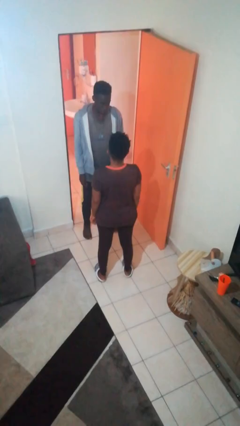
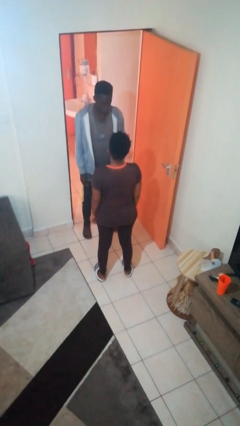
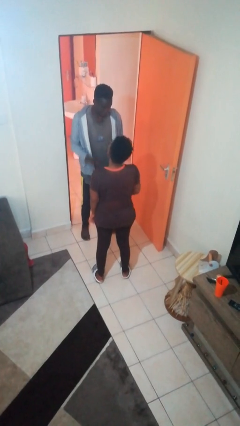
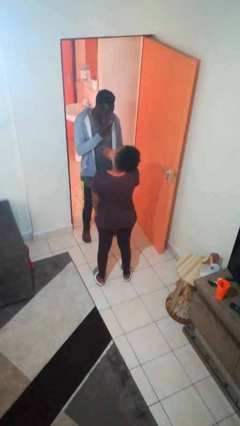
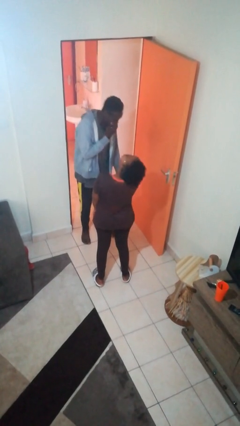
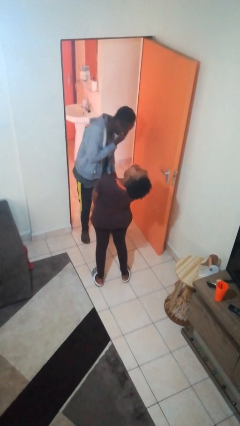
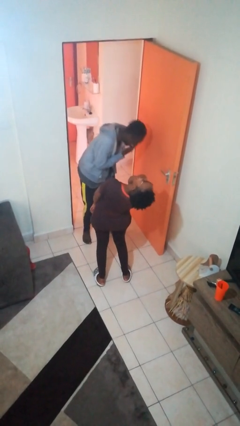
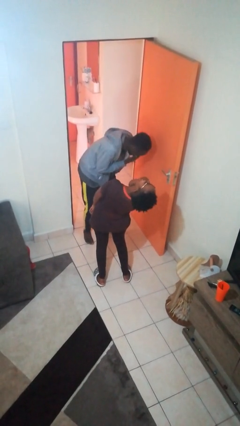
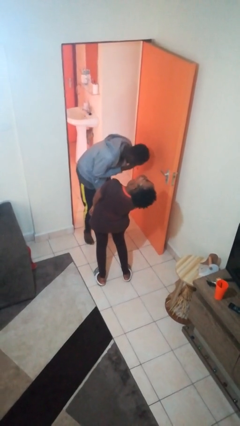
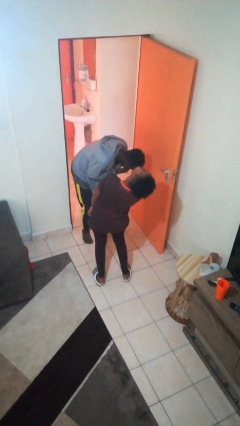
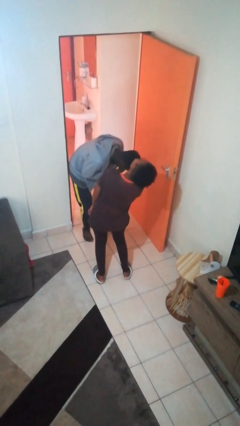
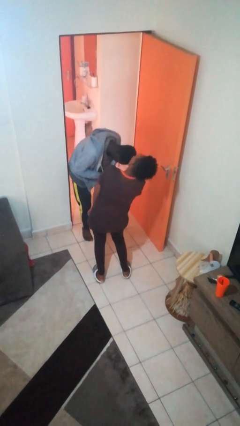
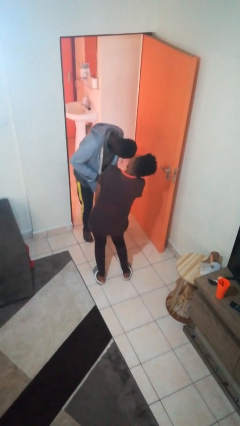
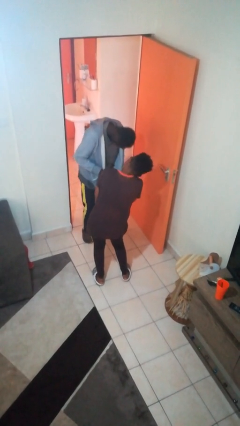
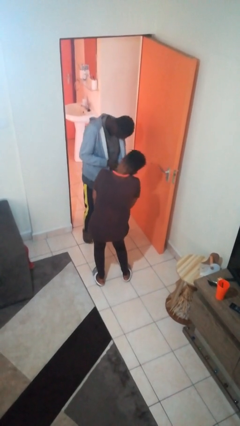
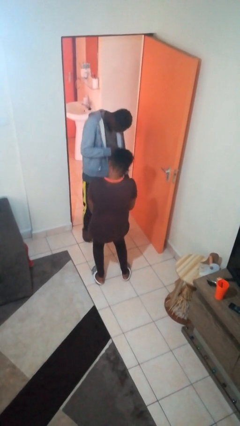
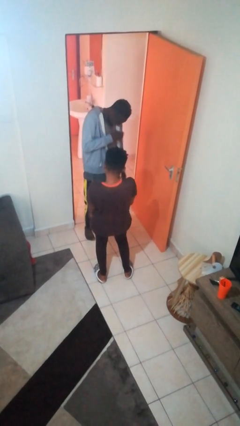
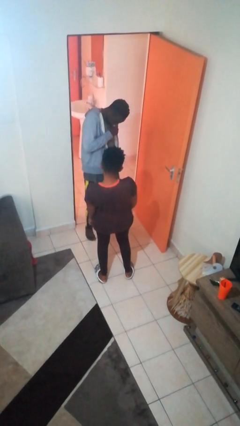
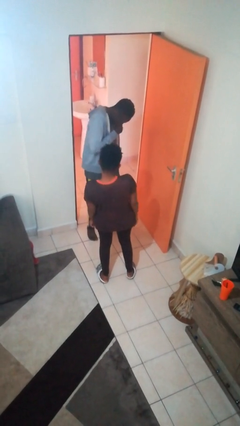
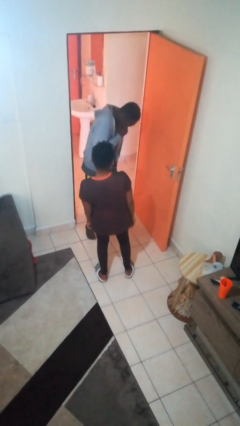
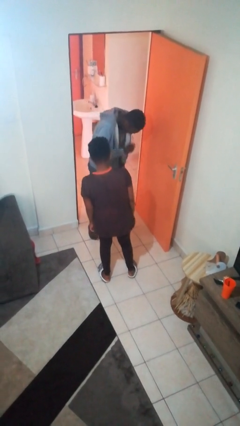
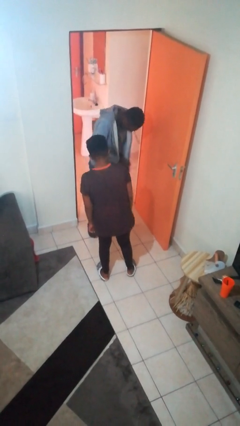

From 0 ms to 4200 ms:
person laughs with person

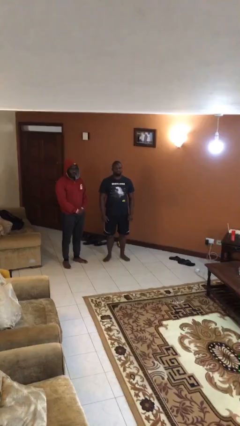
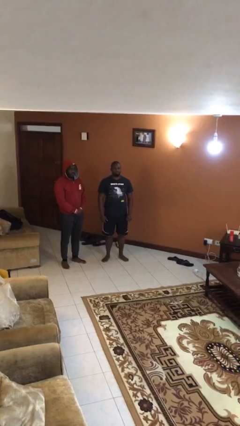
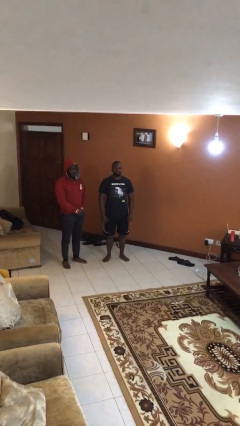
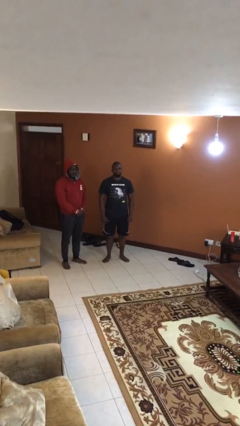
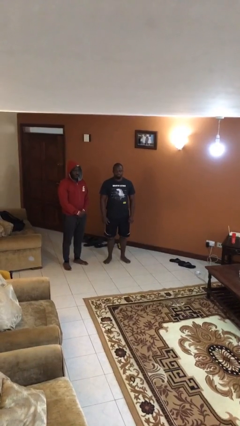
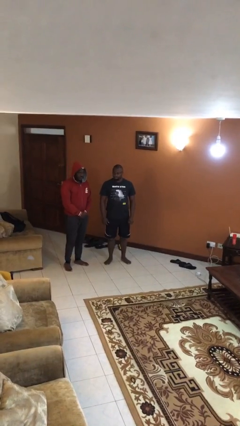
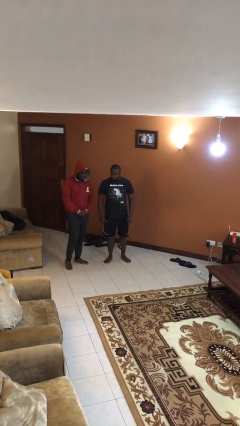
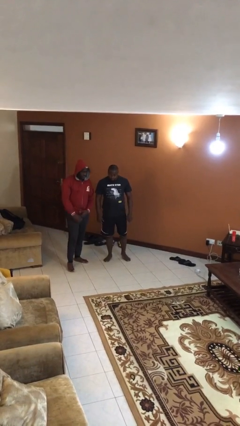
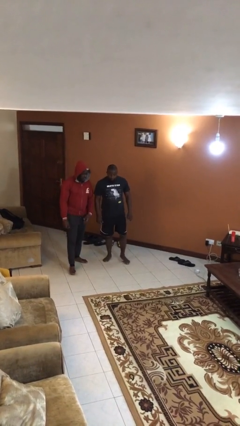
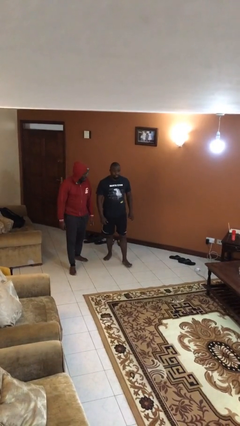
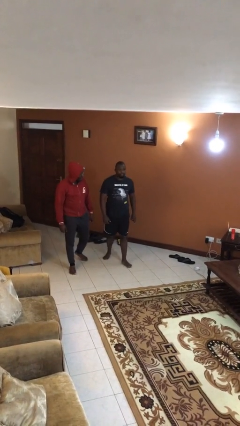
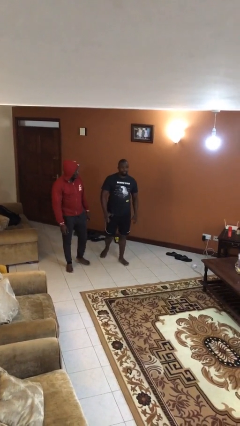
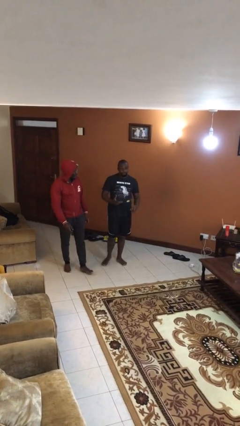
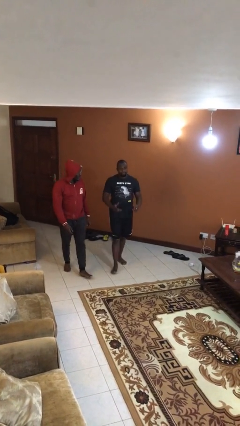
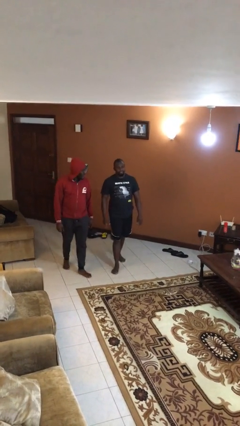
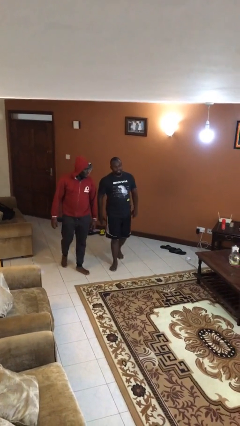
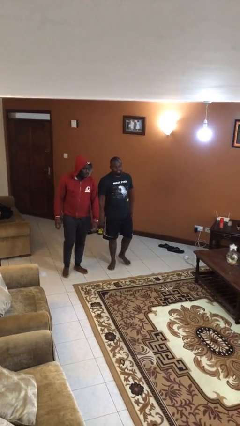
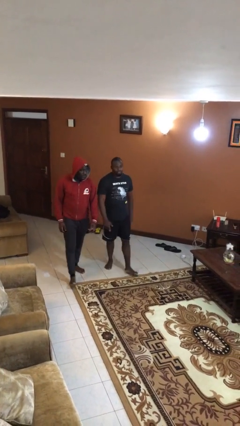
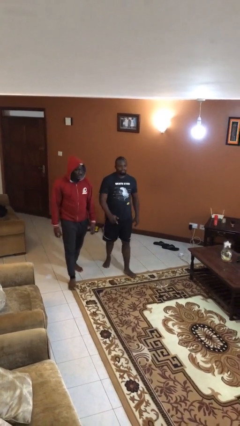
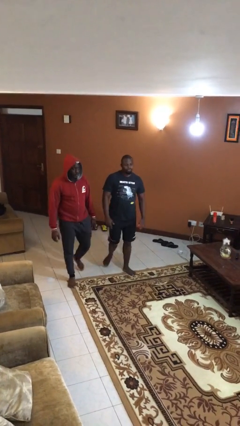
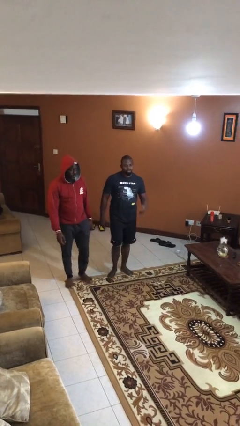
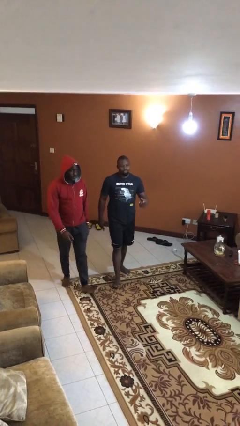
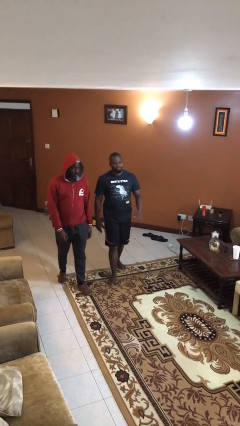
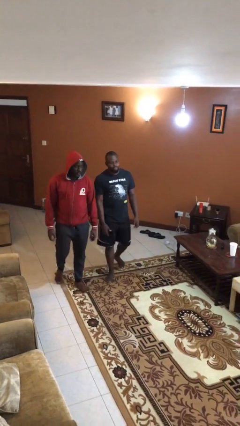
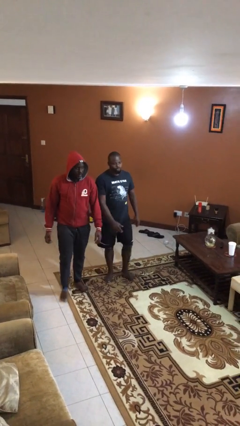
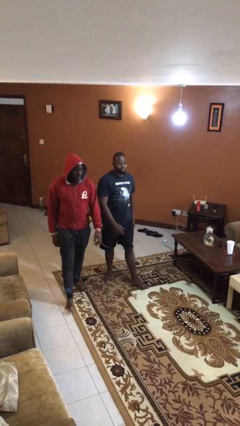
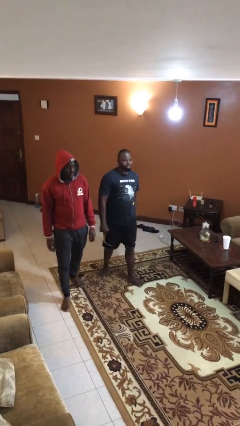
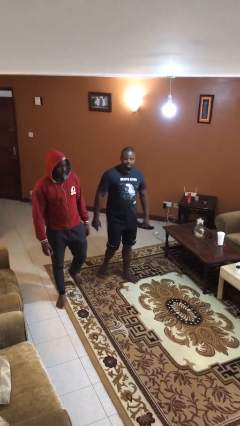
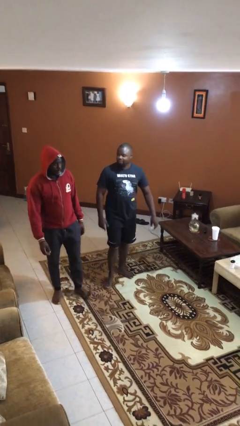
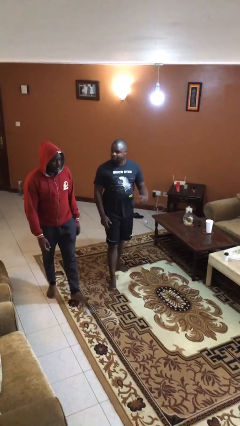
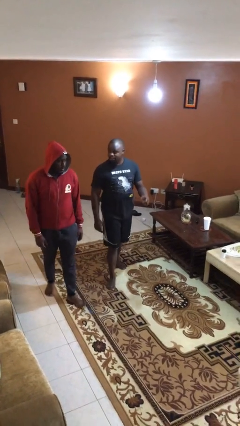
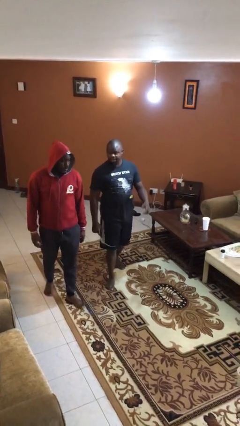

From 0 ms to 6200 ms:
person talks to person

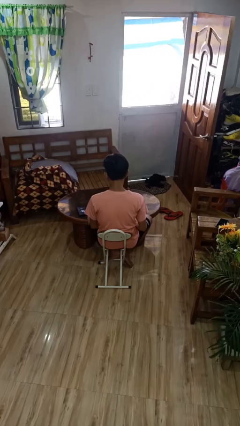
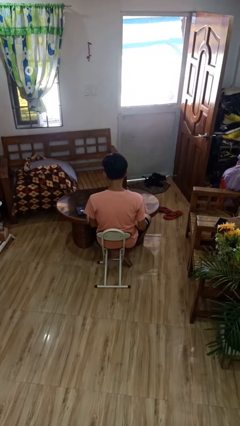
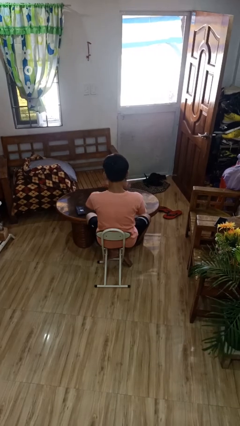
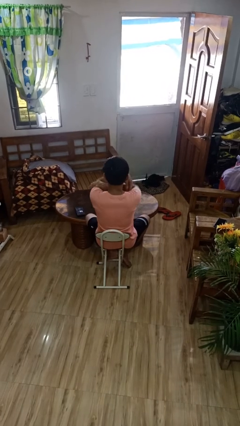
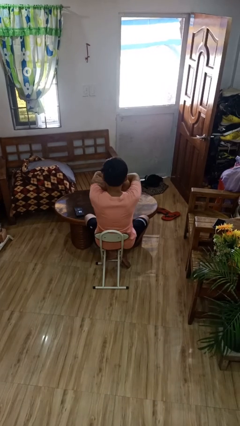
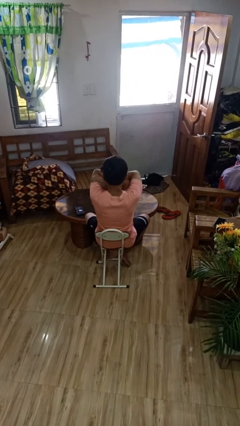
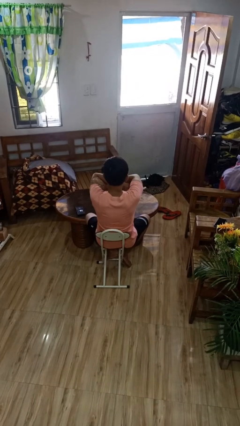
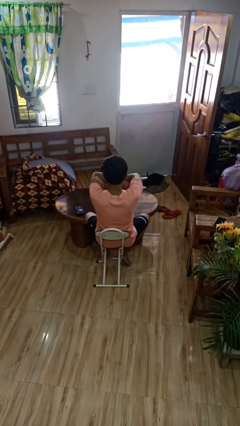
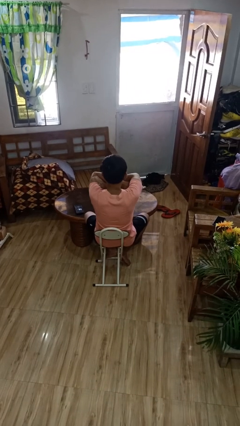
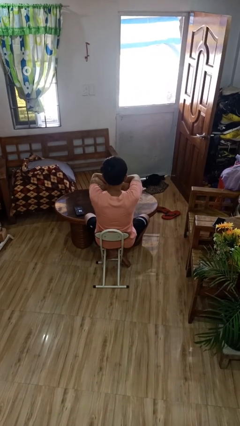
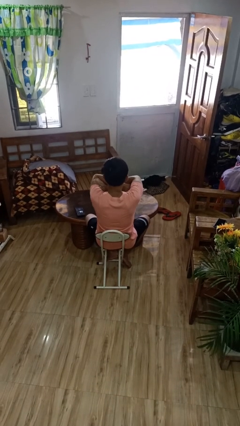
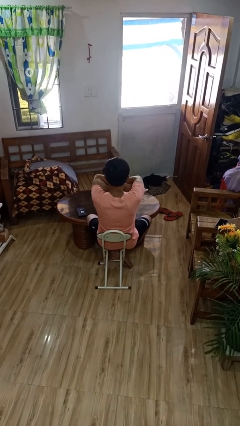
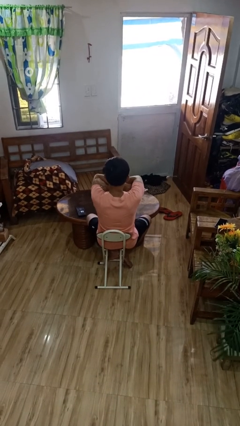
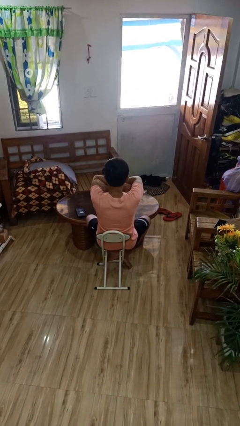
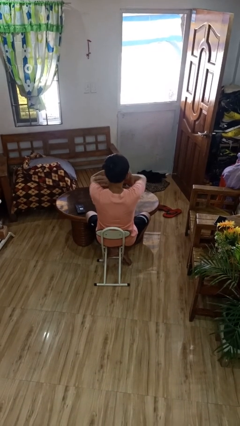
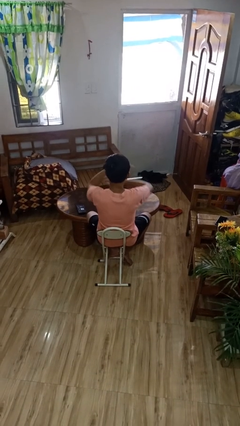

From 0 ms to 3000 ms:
person crosses arms

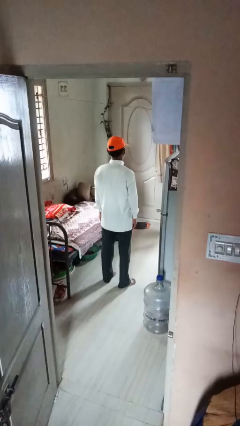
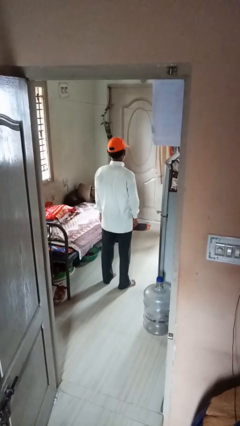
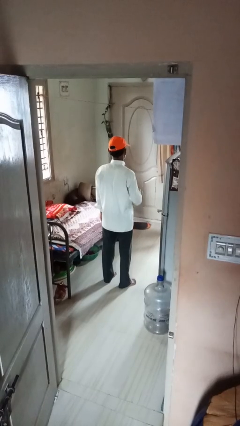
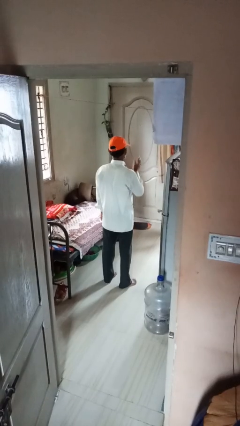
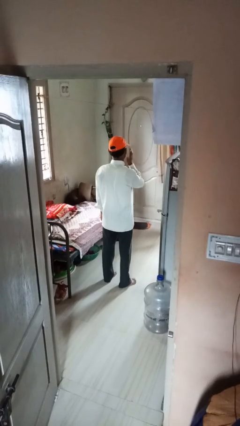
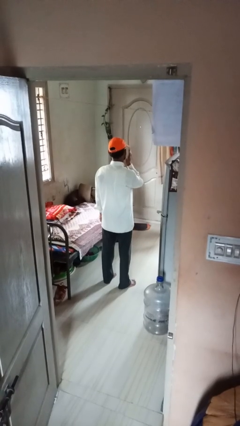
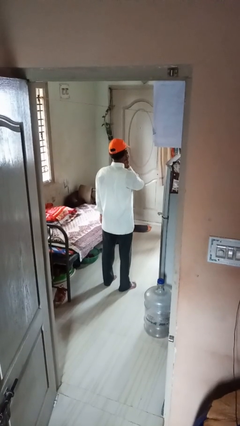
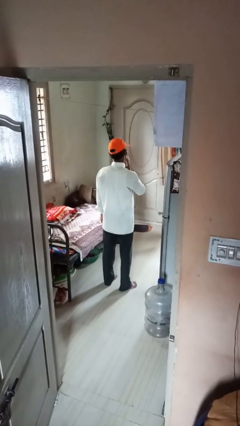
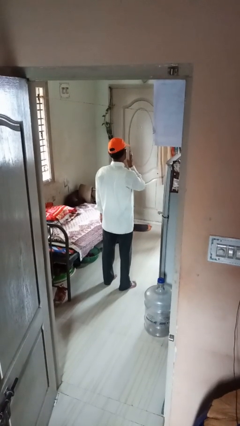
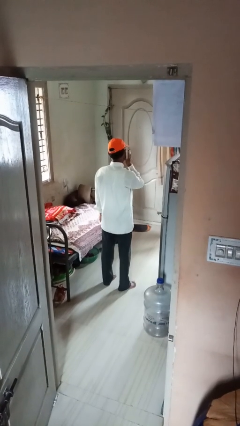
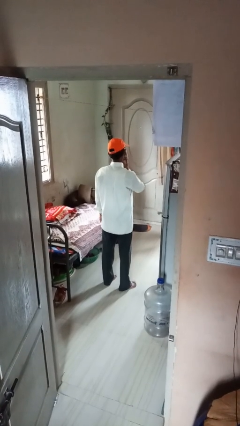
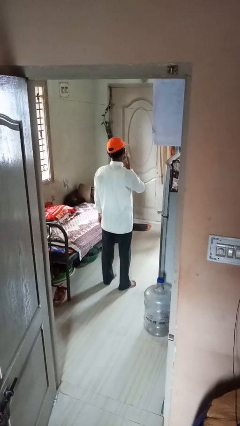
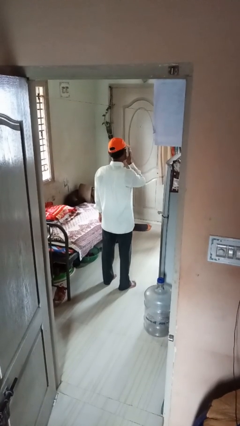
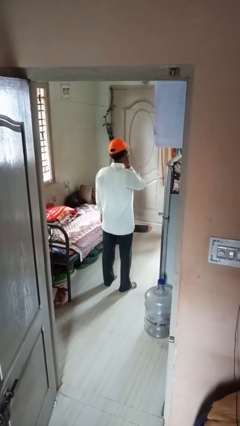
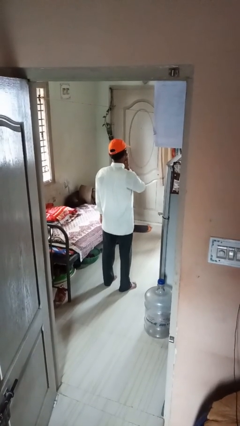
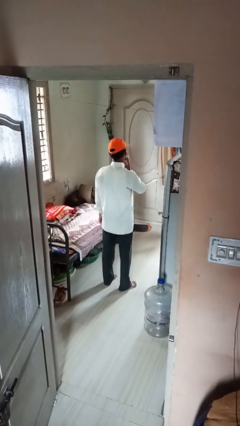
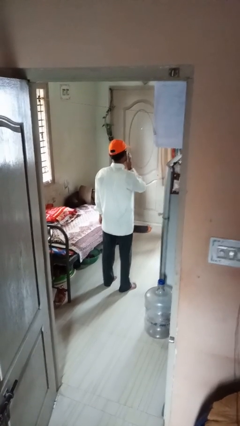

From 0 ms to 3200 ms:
person scratches face

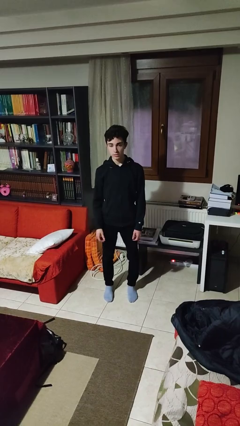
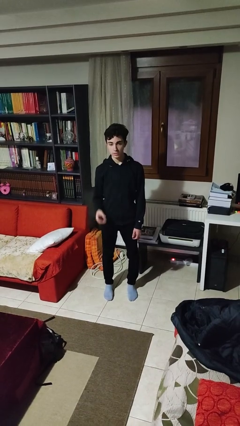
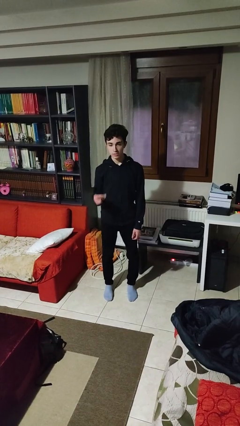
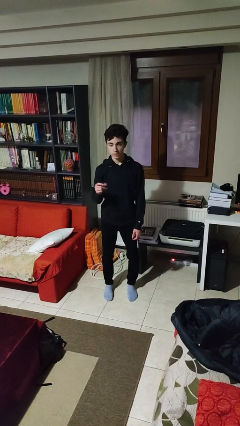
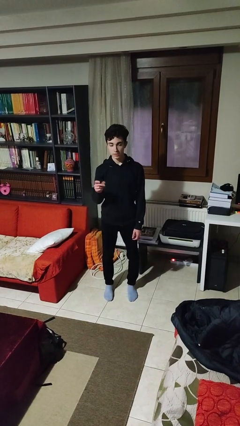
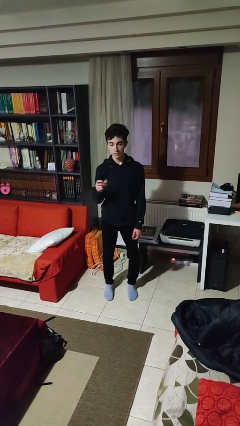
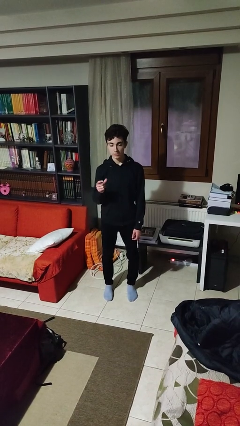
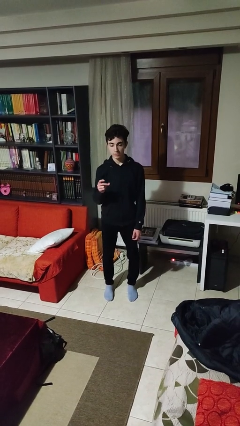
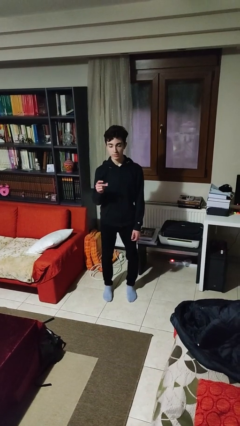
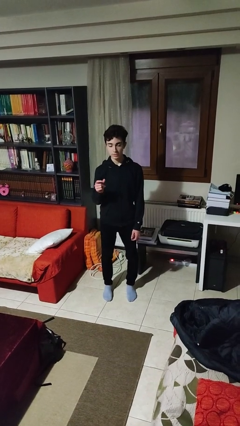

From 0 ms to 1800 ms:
person snaps fingers
